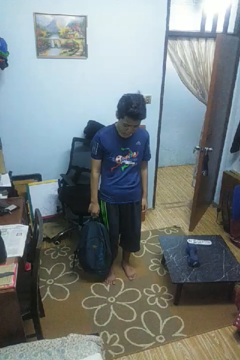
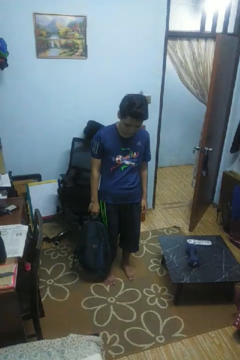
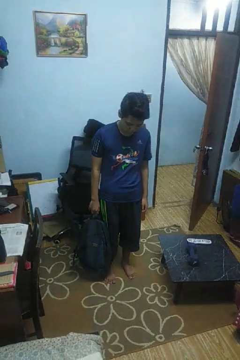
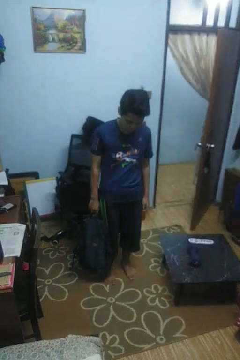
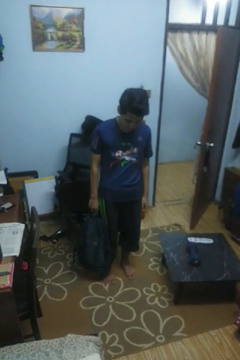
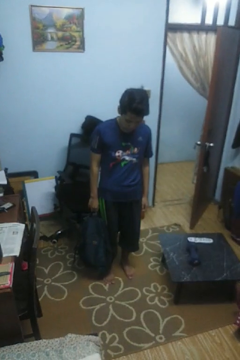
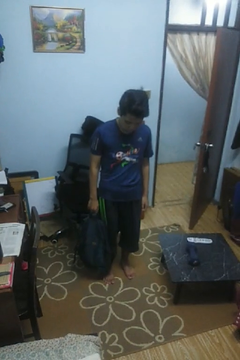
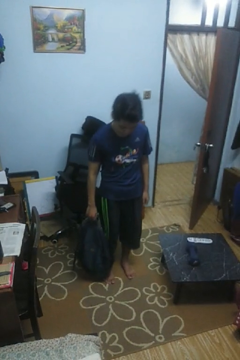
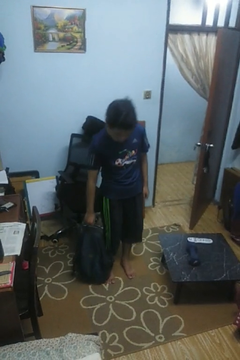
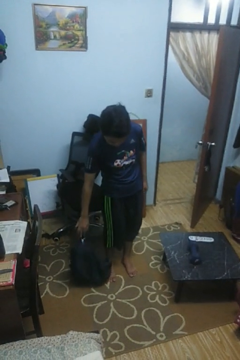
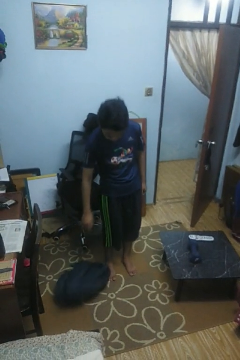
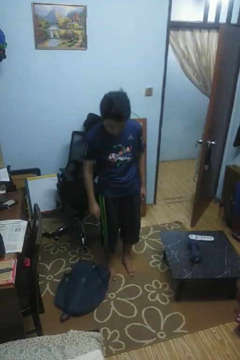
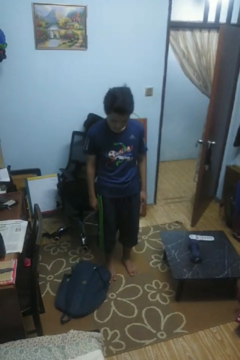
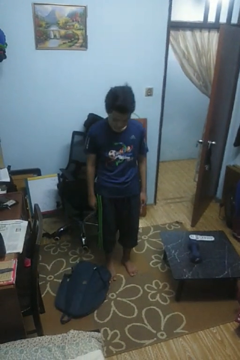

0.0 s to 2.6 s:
person drops object

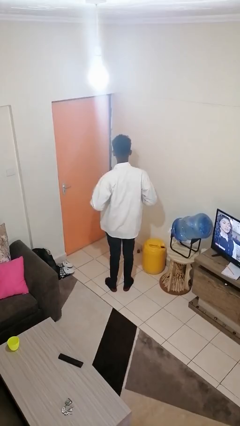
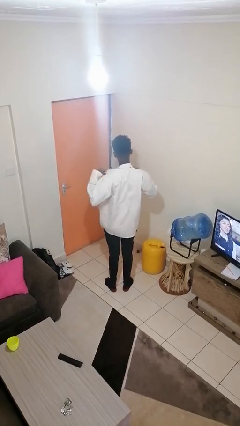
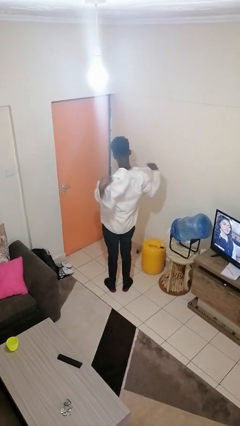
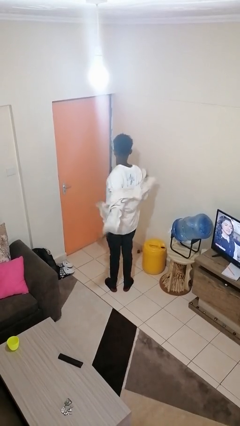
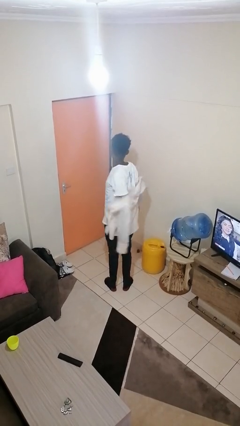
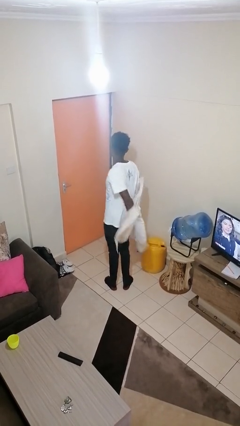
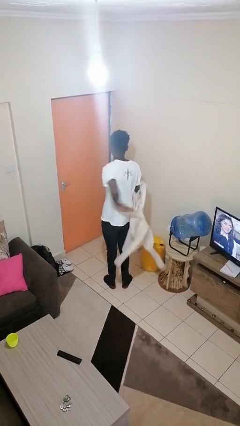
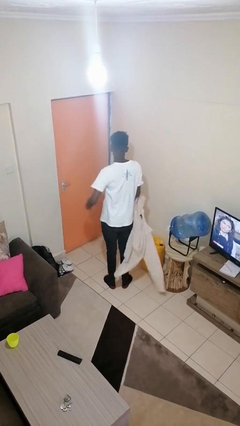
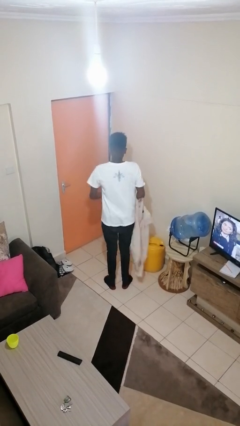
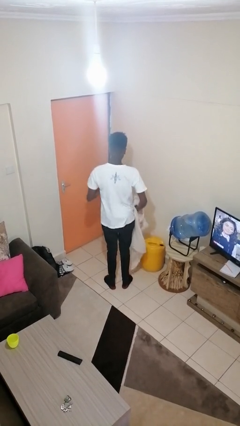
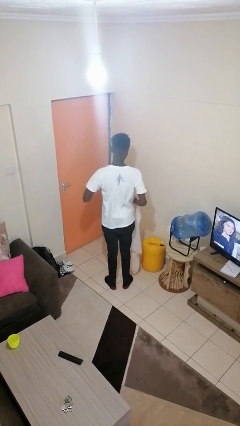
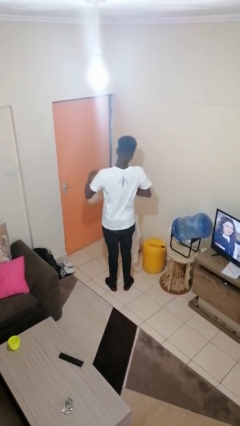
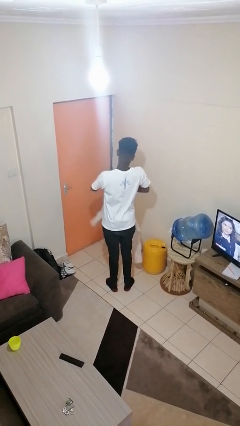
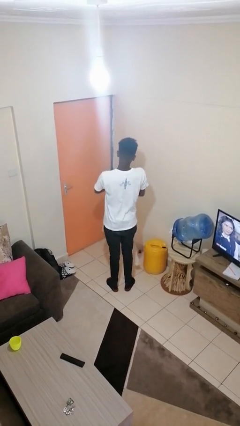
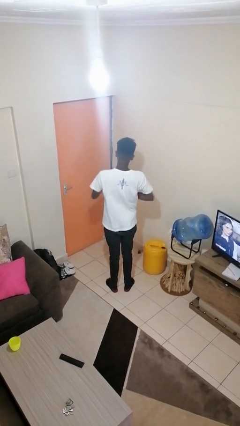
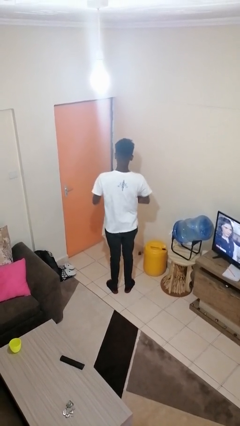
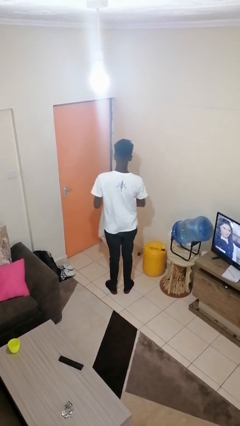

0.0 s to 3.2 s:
person takes off shirt

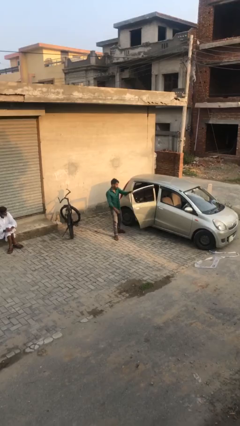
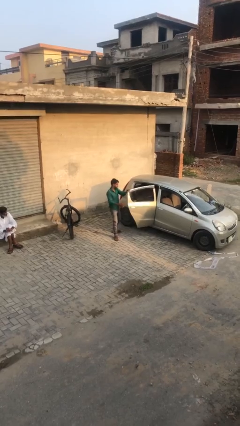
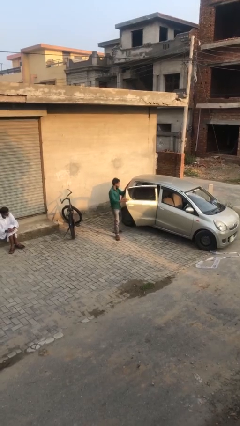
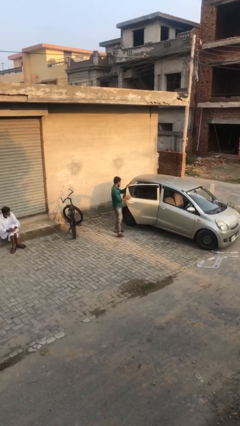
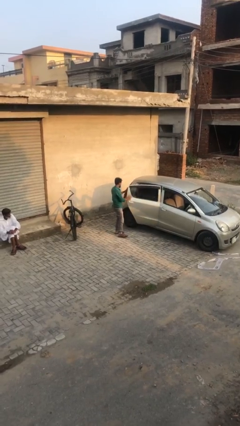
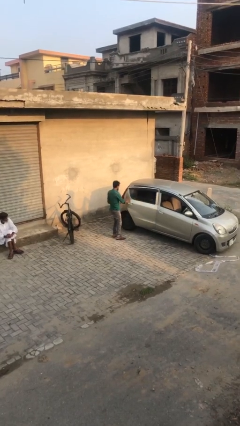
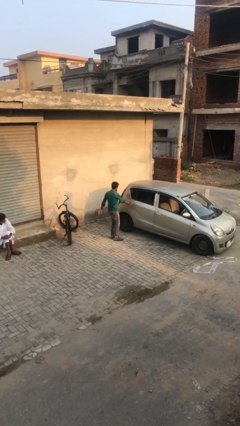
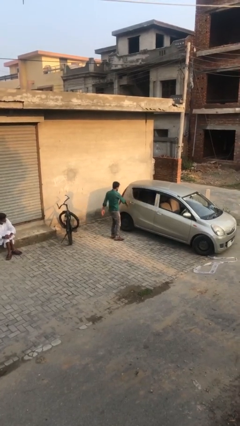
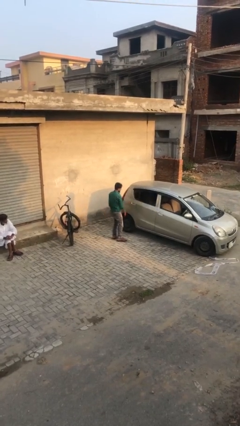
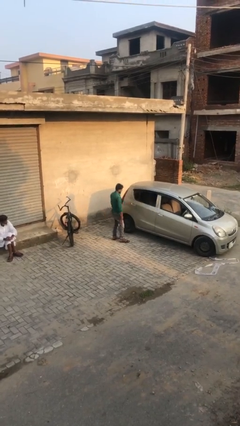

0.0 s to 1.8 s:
person closes car door

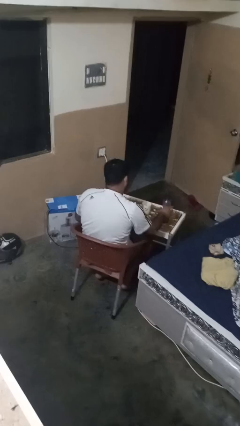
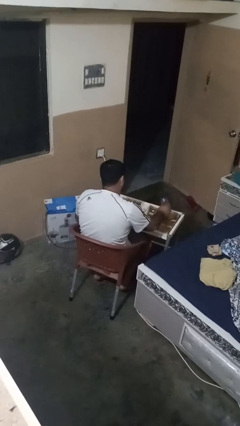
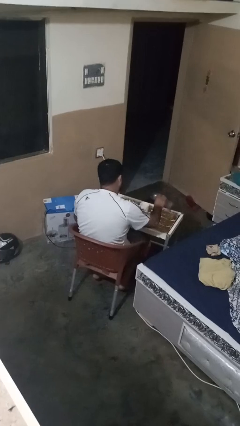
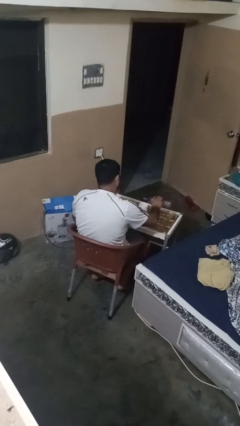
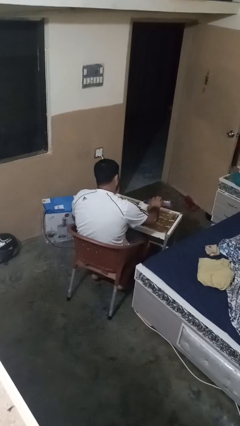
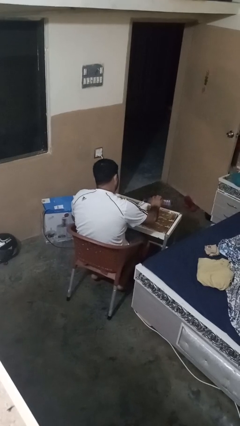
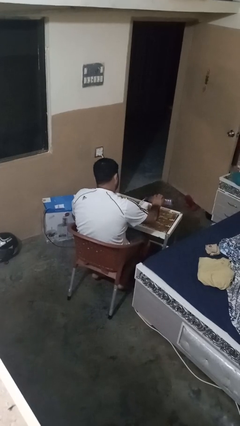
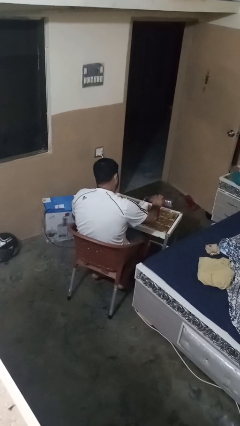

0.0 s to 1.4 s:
person pours liquid into cup

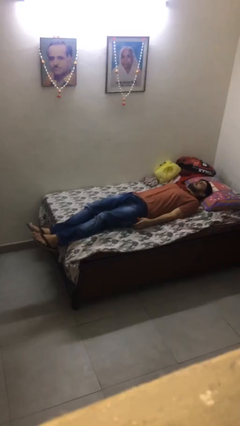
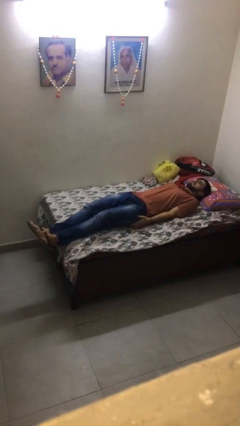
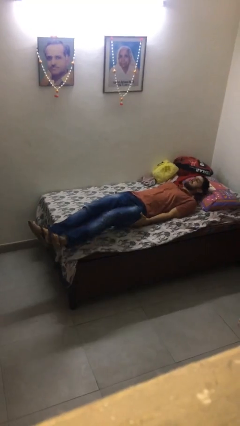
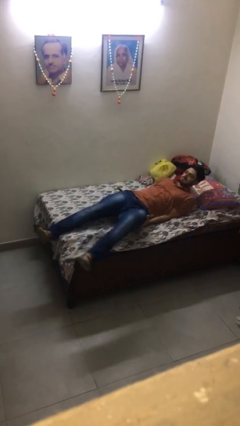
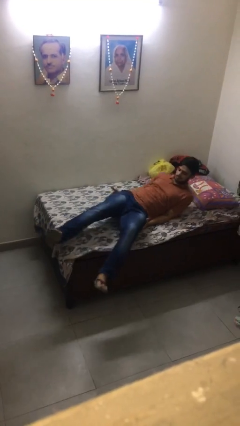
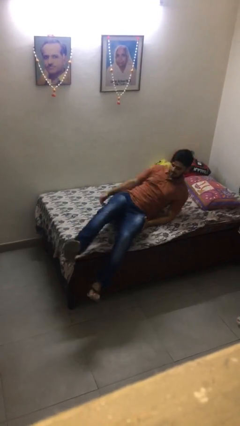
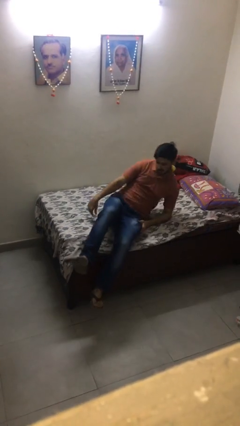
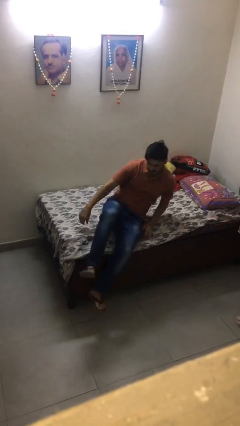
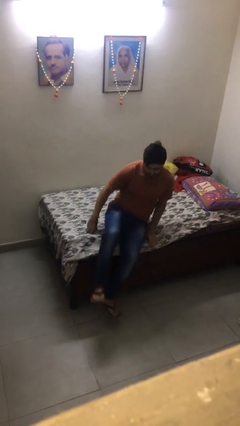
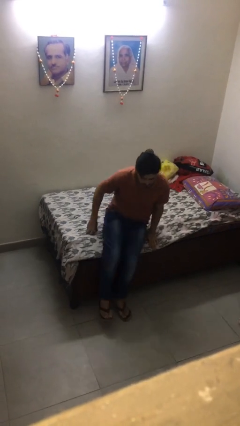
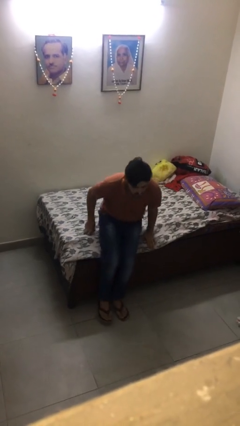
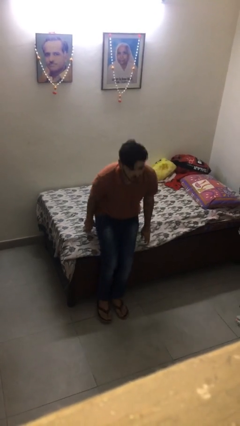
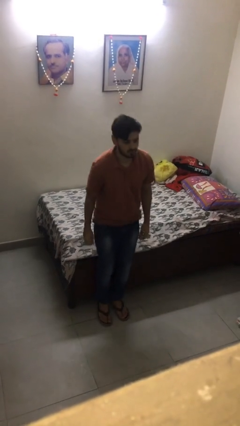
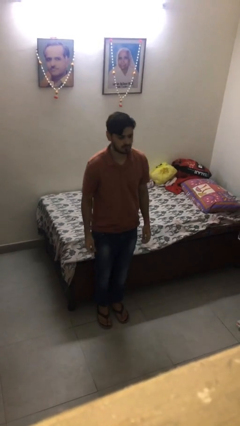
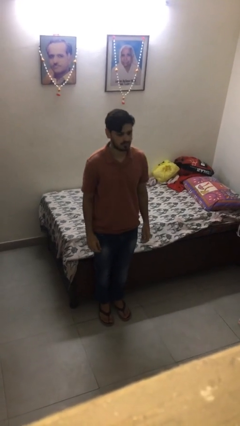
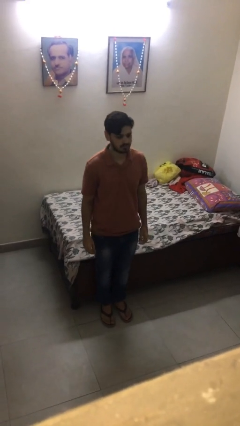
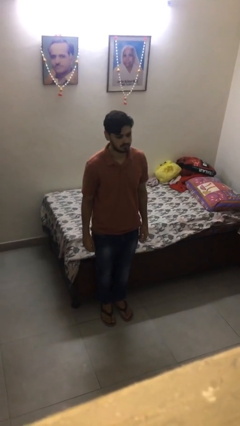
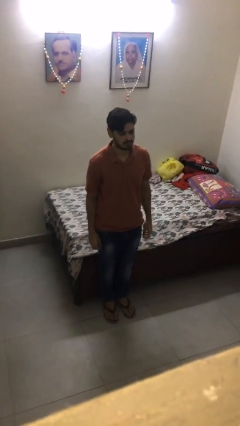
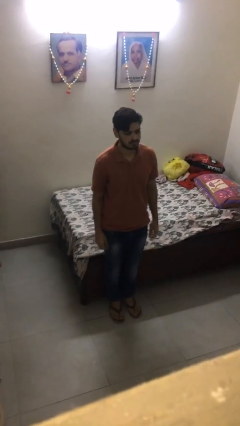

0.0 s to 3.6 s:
person stands up

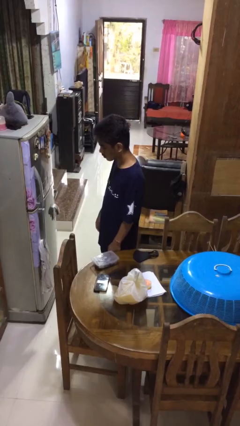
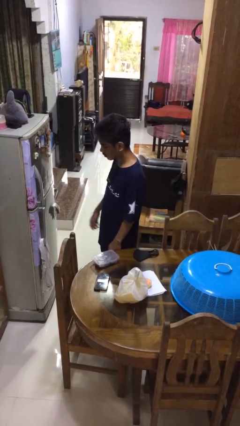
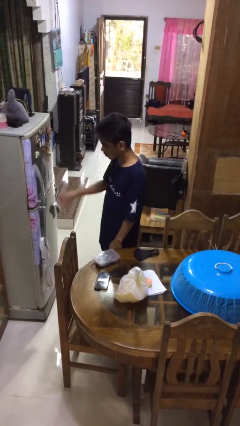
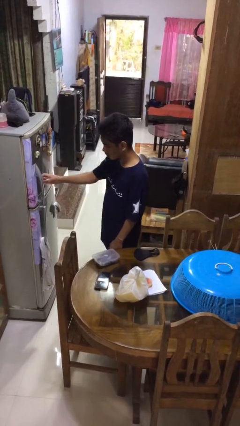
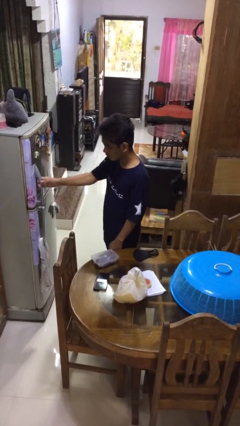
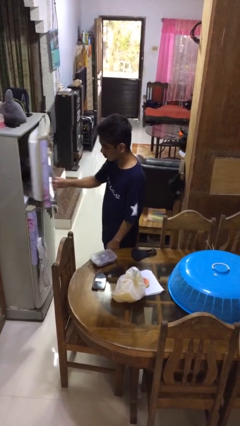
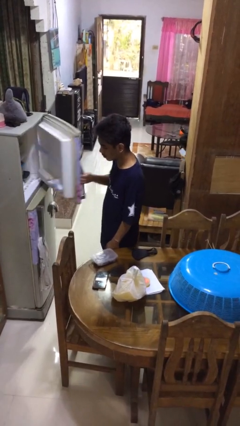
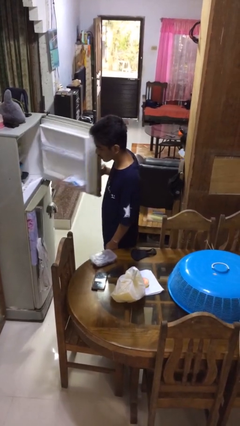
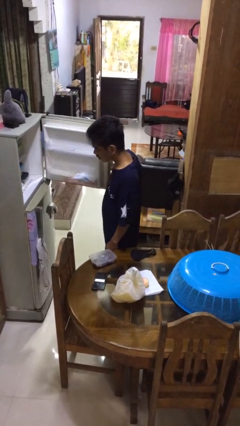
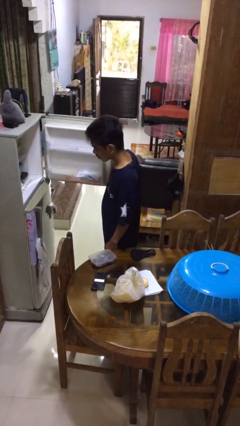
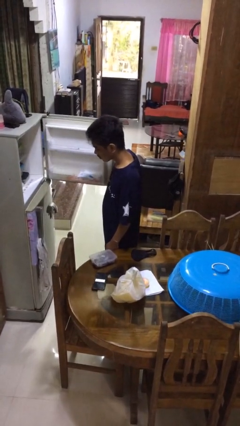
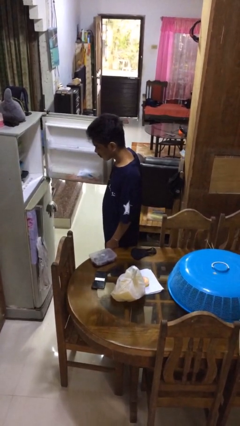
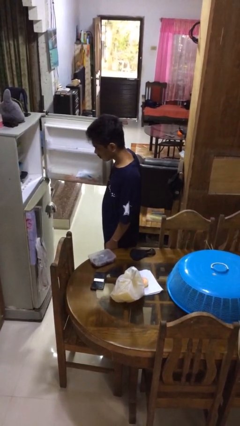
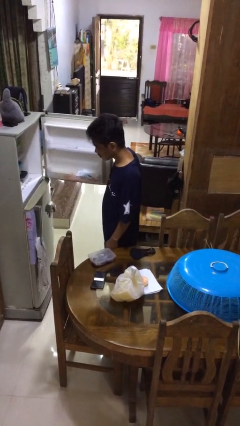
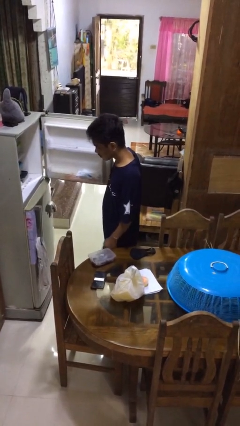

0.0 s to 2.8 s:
person opens refrigerator

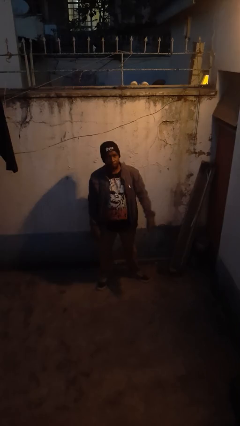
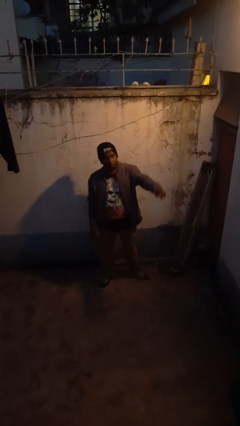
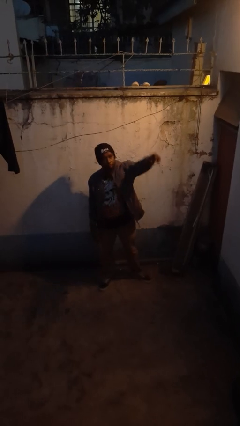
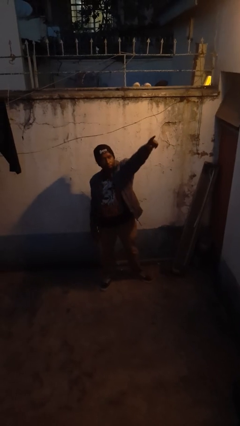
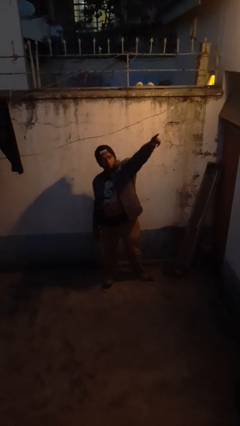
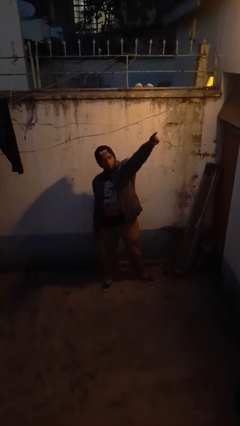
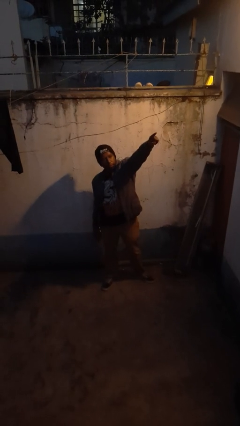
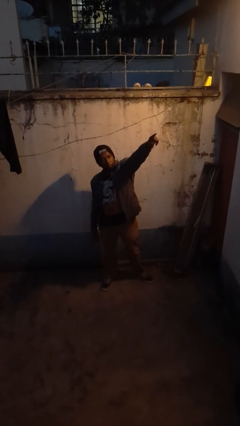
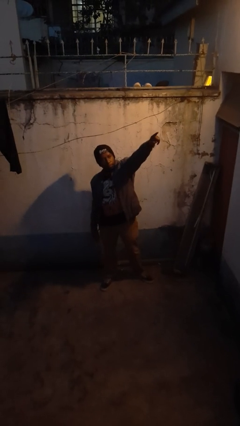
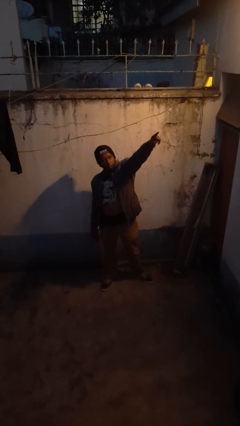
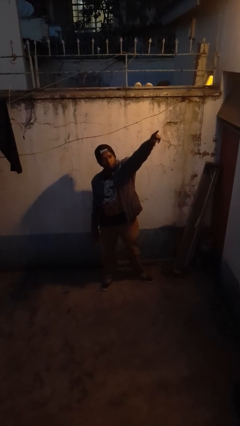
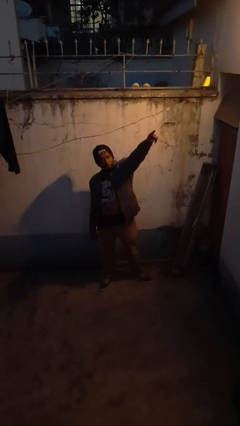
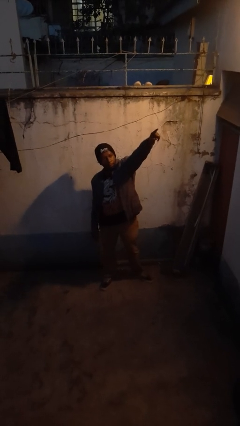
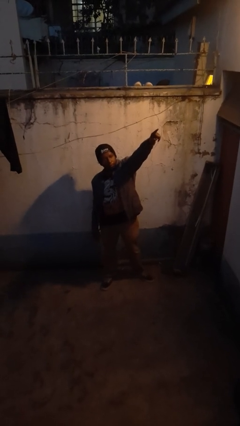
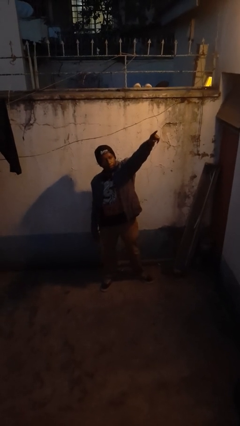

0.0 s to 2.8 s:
person points at person
